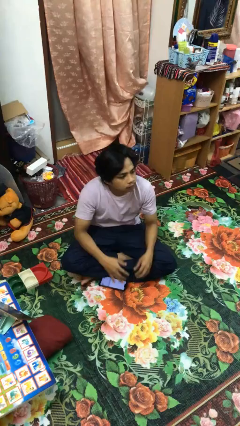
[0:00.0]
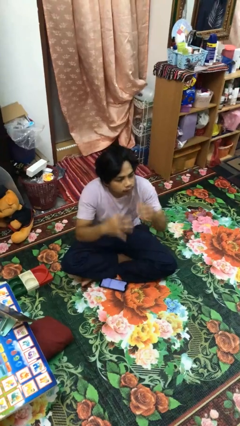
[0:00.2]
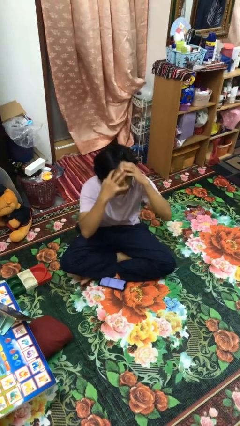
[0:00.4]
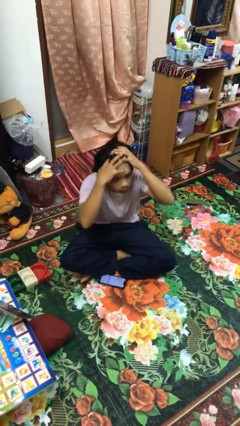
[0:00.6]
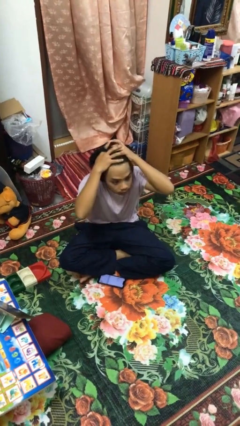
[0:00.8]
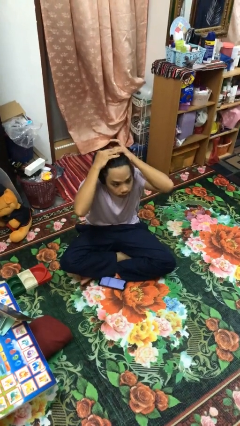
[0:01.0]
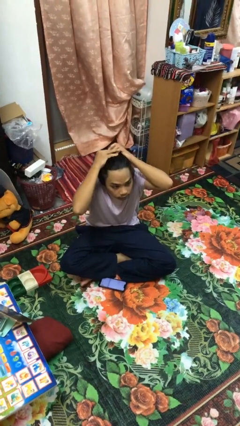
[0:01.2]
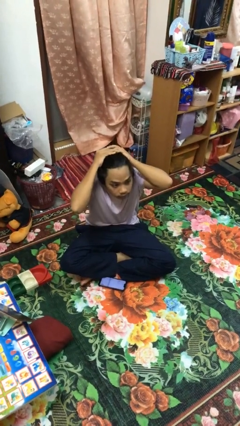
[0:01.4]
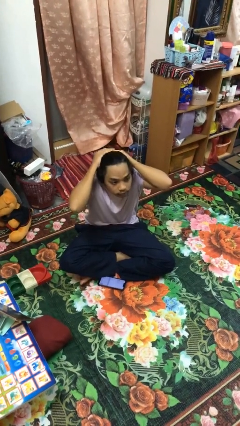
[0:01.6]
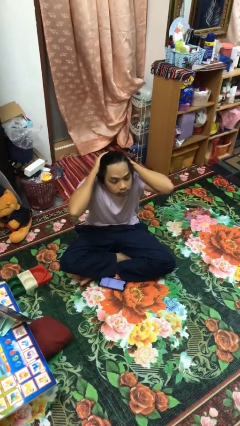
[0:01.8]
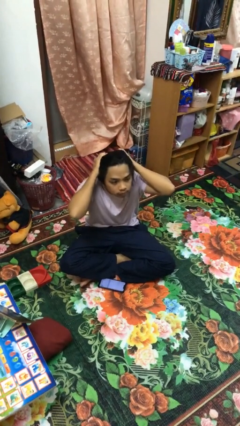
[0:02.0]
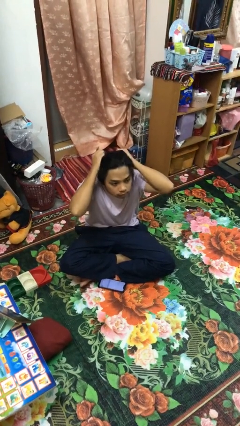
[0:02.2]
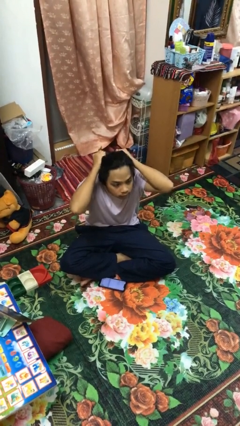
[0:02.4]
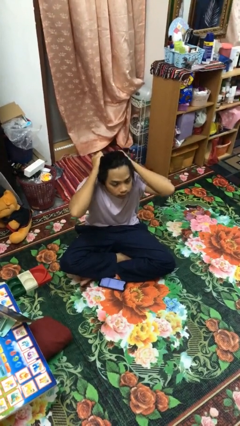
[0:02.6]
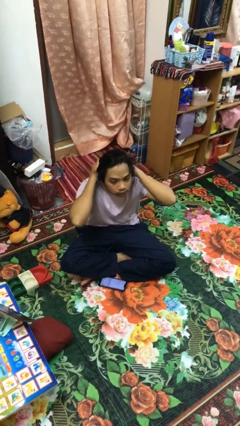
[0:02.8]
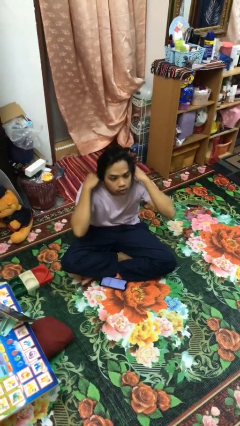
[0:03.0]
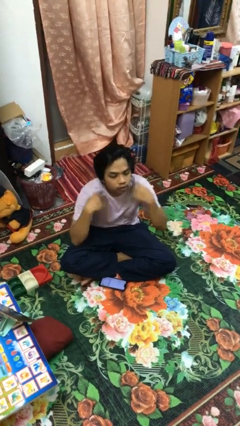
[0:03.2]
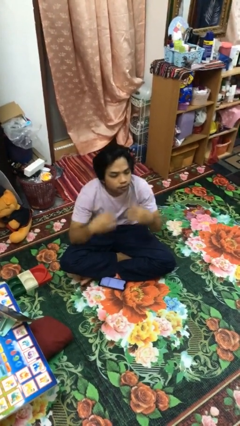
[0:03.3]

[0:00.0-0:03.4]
person strokes hair

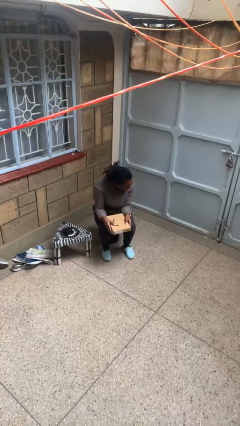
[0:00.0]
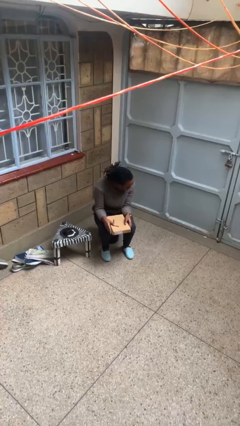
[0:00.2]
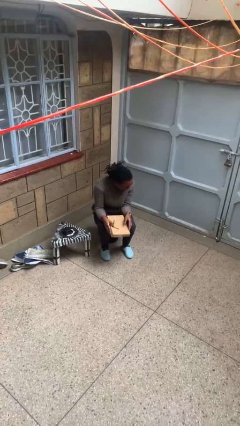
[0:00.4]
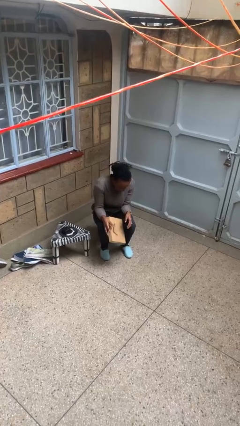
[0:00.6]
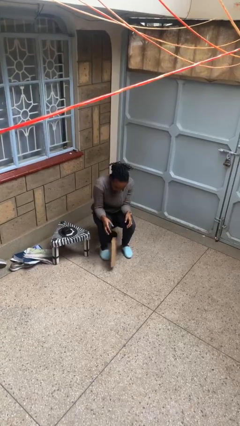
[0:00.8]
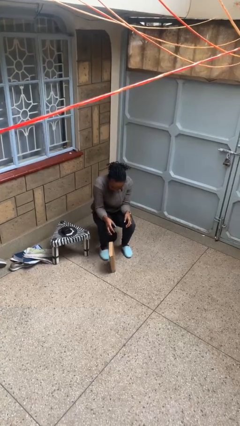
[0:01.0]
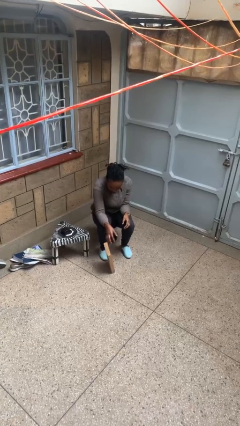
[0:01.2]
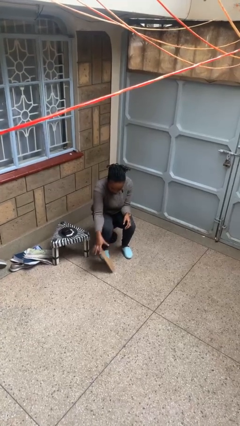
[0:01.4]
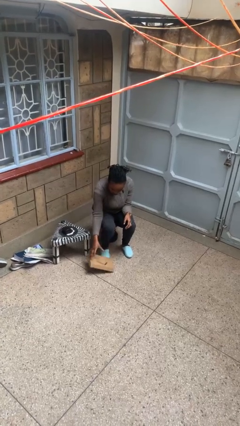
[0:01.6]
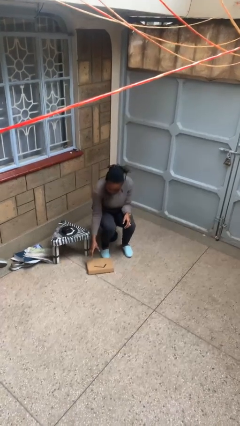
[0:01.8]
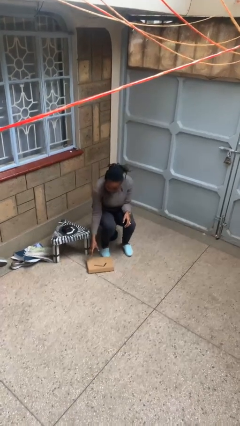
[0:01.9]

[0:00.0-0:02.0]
person drops object

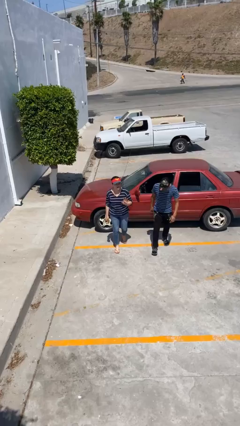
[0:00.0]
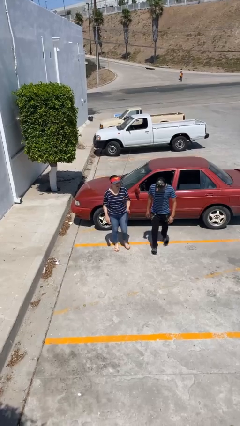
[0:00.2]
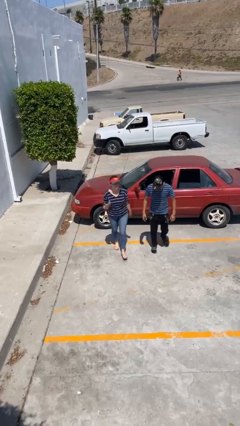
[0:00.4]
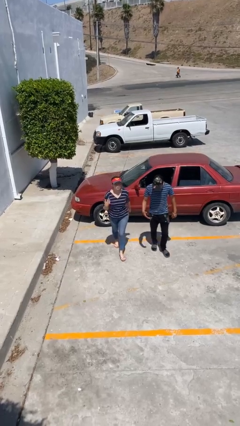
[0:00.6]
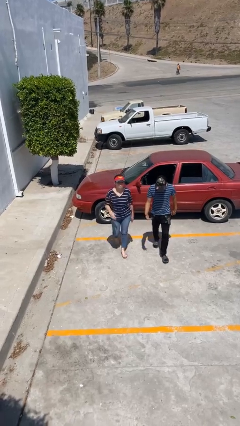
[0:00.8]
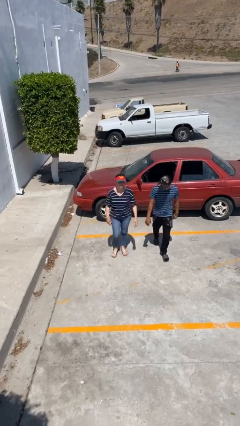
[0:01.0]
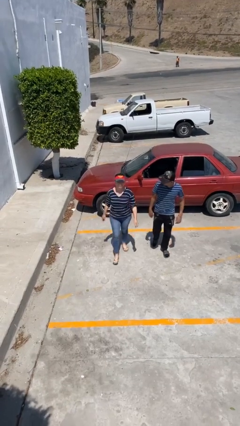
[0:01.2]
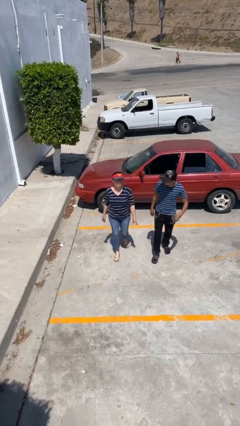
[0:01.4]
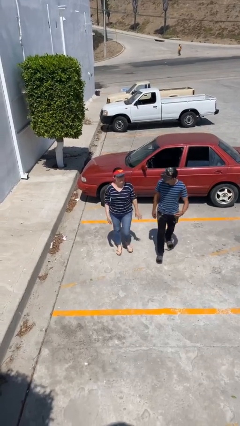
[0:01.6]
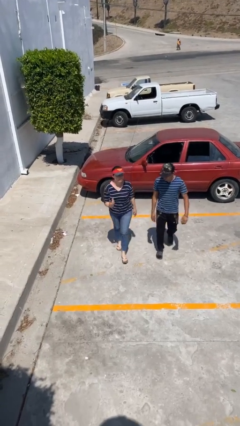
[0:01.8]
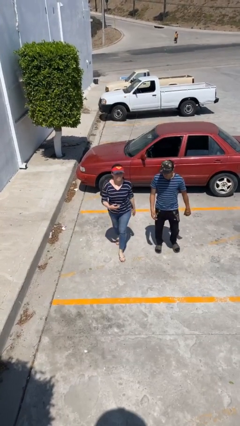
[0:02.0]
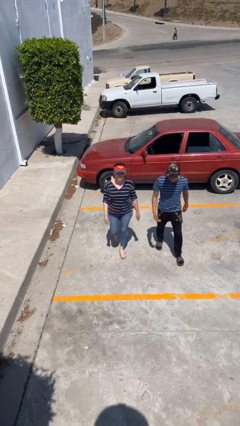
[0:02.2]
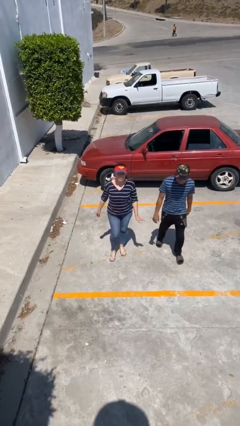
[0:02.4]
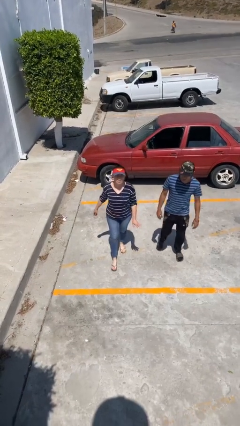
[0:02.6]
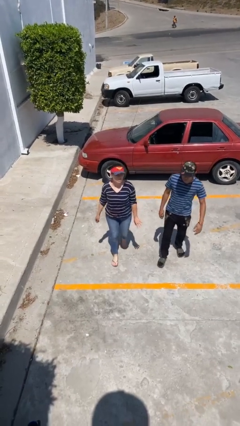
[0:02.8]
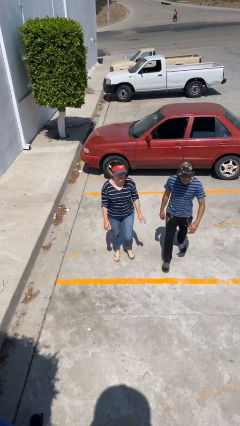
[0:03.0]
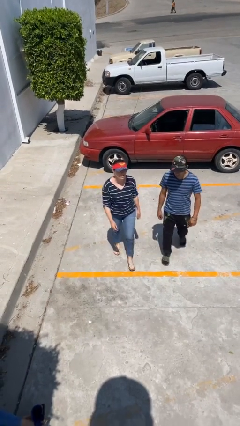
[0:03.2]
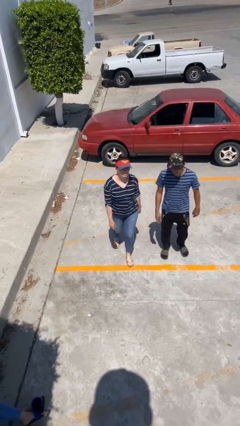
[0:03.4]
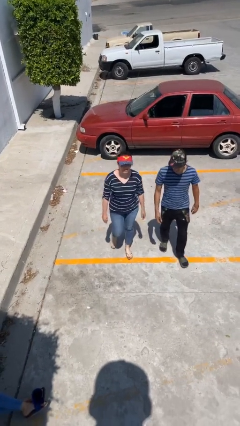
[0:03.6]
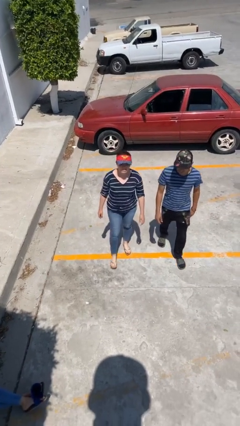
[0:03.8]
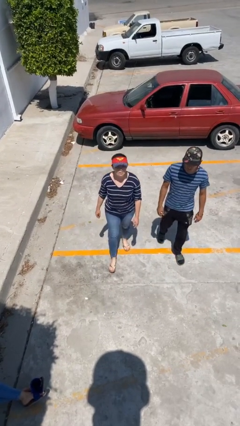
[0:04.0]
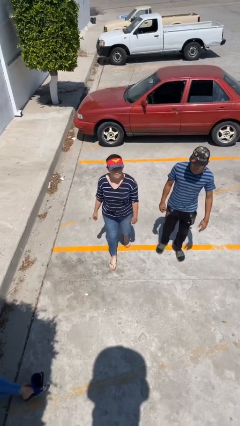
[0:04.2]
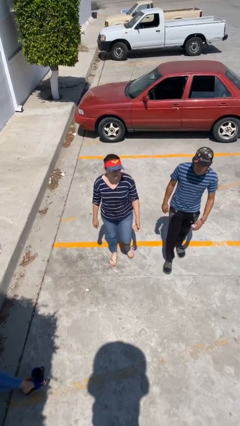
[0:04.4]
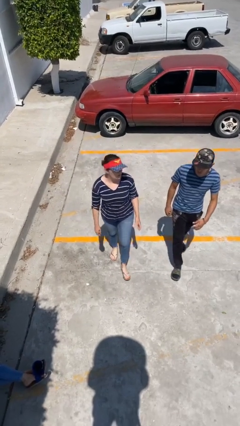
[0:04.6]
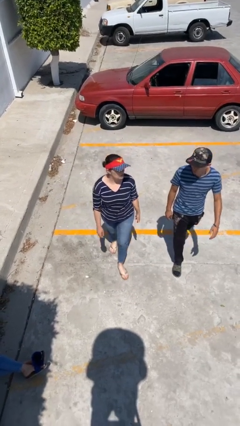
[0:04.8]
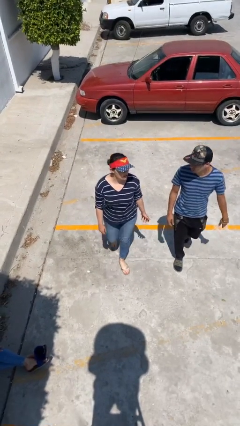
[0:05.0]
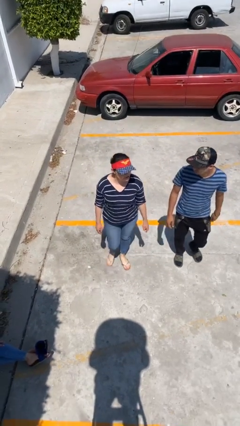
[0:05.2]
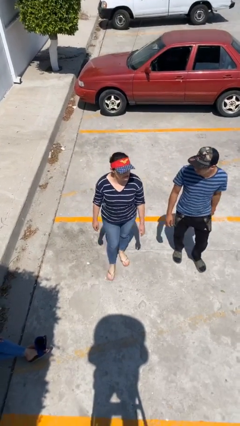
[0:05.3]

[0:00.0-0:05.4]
person talks to person

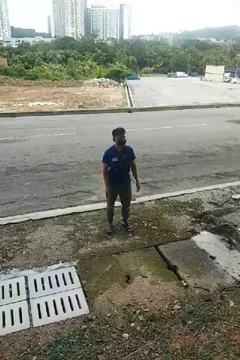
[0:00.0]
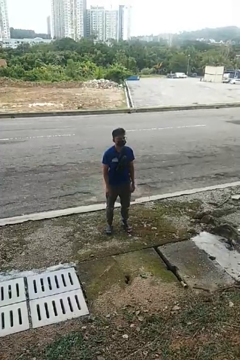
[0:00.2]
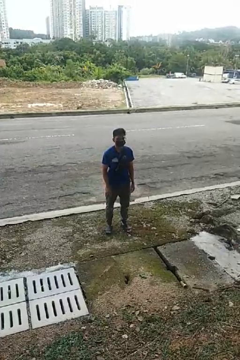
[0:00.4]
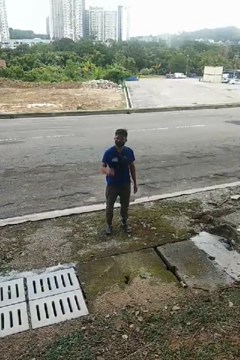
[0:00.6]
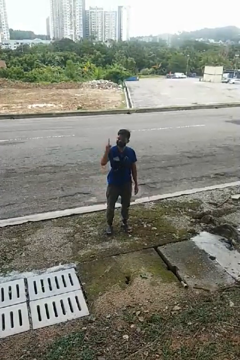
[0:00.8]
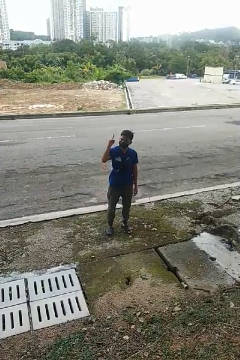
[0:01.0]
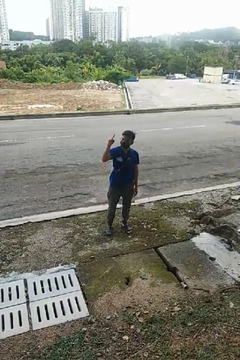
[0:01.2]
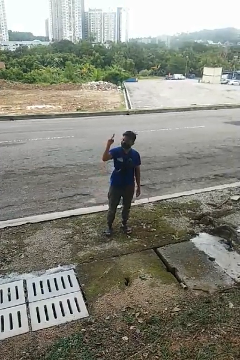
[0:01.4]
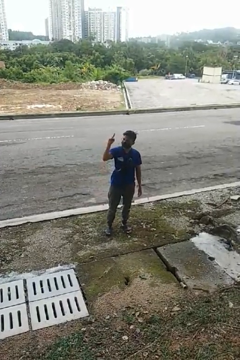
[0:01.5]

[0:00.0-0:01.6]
person gestures number one

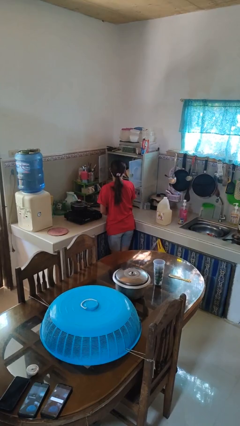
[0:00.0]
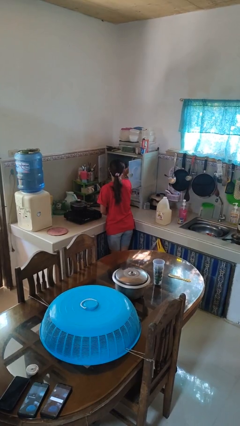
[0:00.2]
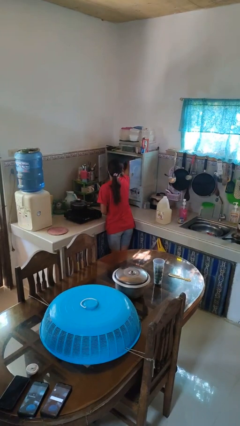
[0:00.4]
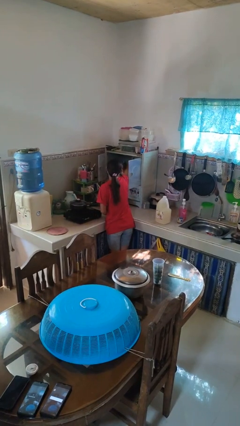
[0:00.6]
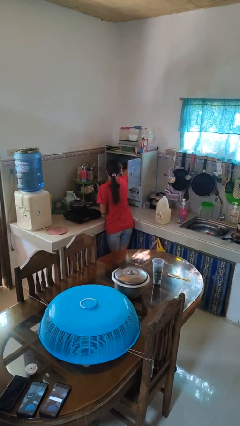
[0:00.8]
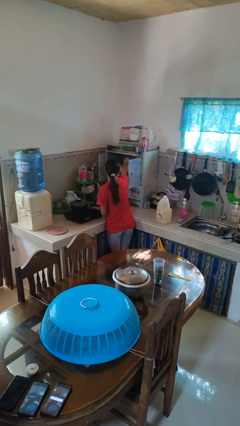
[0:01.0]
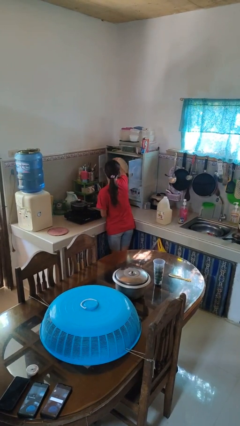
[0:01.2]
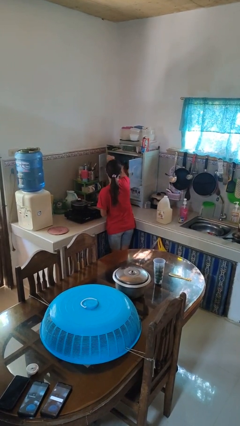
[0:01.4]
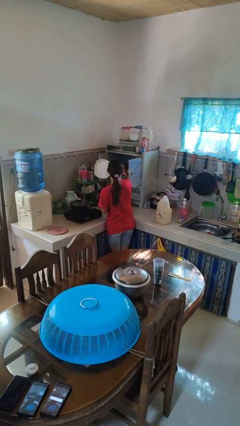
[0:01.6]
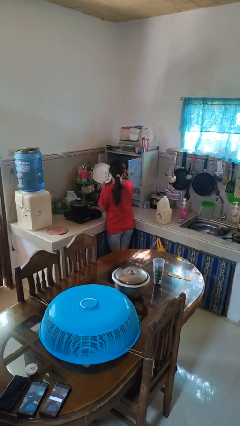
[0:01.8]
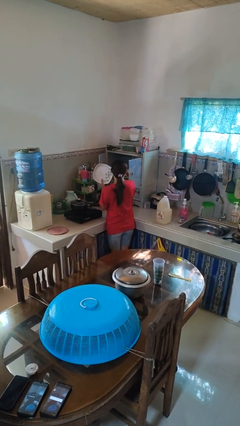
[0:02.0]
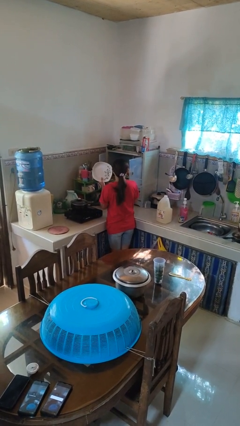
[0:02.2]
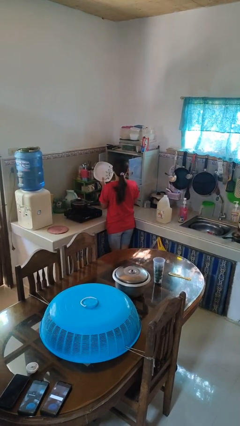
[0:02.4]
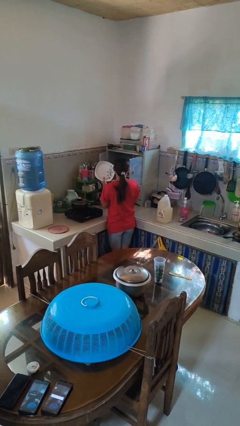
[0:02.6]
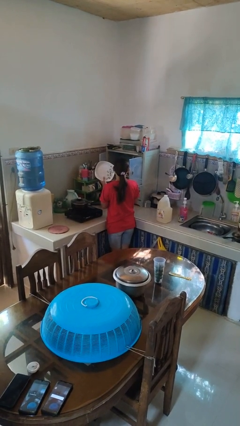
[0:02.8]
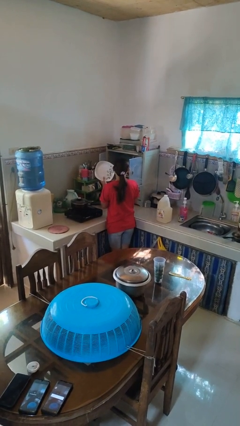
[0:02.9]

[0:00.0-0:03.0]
person takes object from cabinet

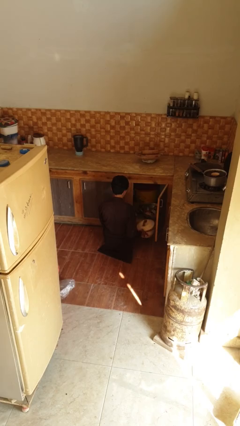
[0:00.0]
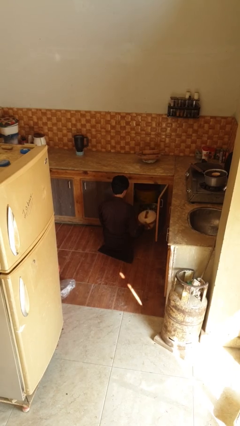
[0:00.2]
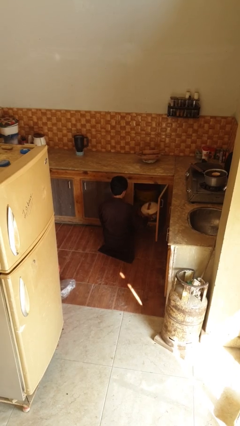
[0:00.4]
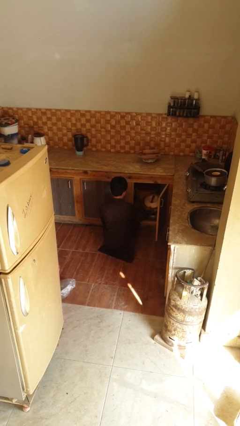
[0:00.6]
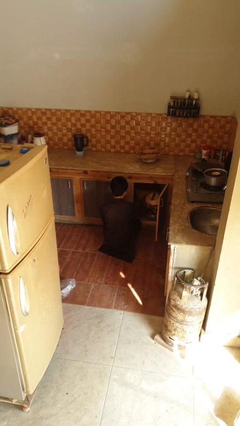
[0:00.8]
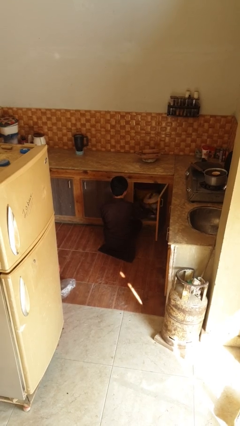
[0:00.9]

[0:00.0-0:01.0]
person puts object into kitchen drawer

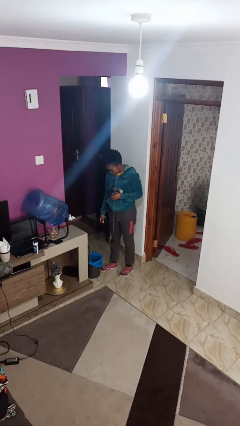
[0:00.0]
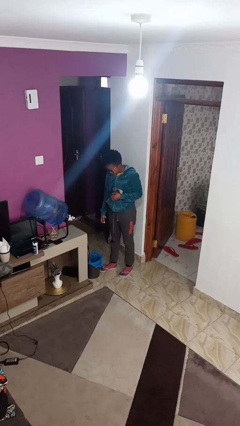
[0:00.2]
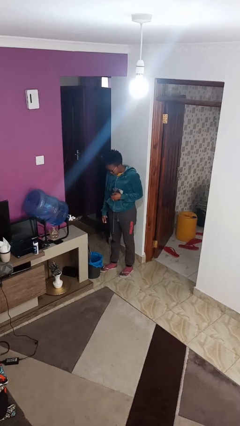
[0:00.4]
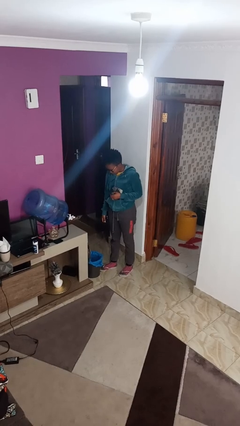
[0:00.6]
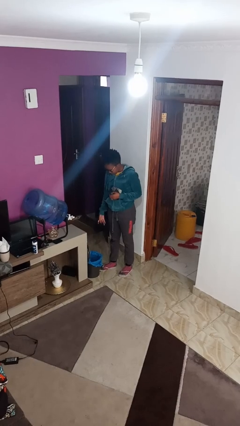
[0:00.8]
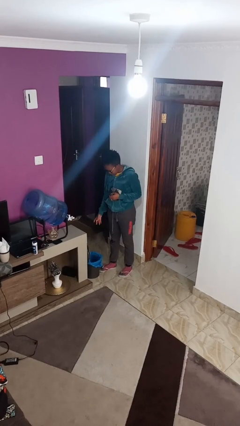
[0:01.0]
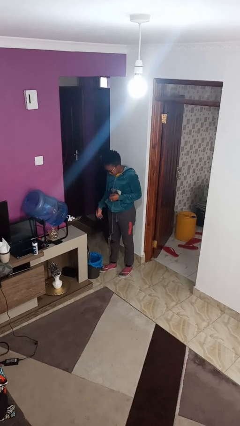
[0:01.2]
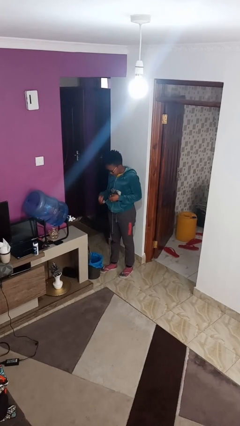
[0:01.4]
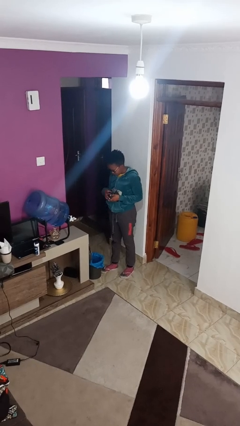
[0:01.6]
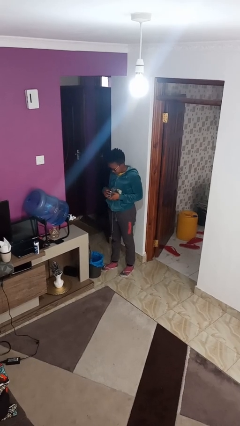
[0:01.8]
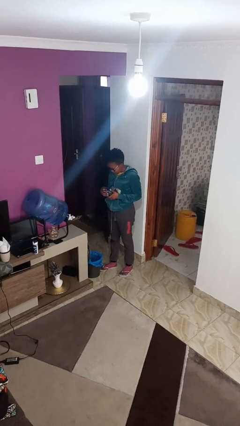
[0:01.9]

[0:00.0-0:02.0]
person discards trash
